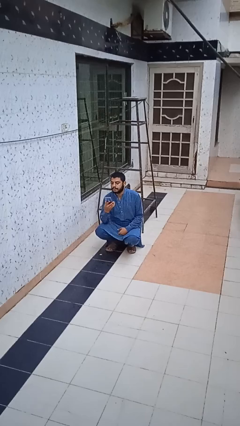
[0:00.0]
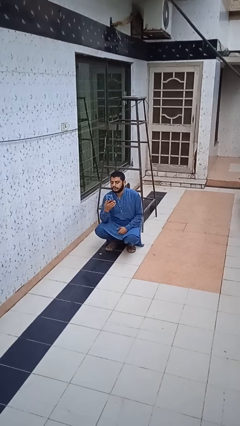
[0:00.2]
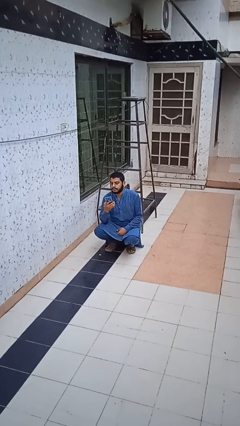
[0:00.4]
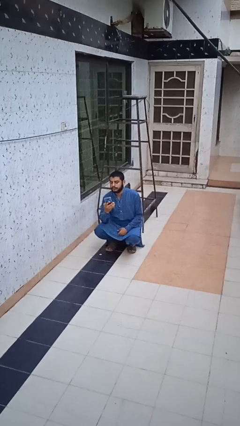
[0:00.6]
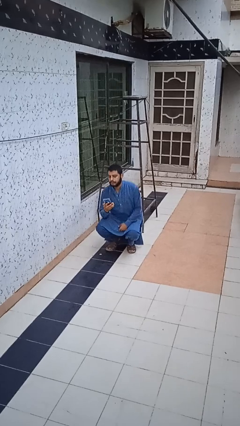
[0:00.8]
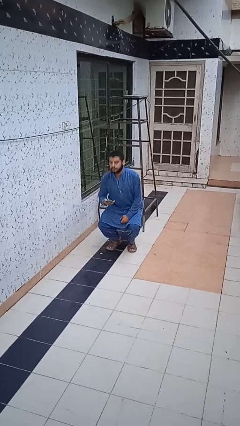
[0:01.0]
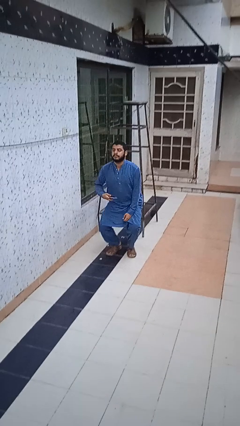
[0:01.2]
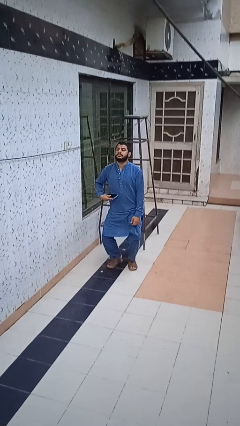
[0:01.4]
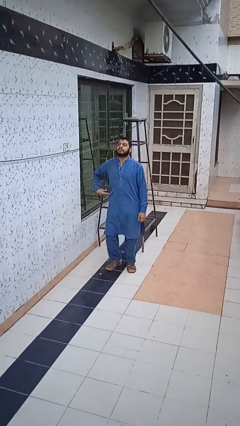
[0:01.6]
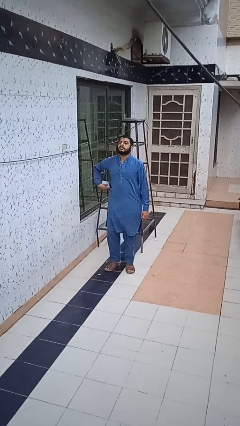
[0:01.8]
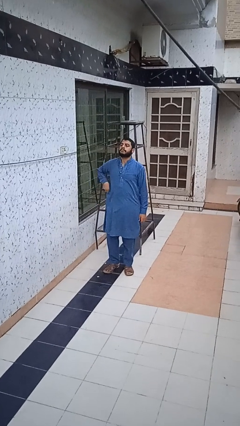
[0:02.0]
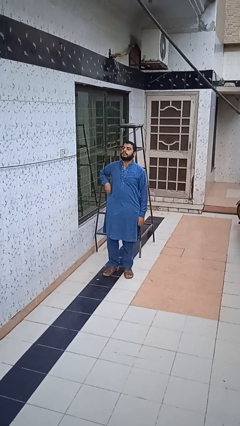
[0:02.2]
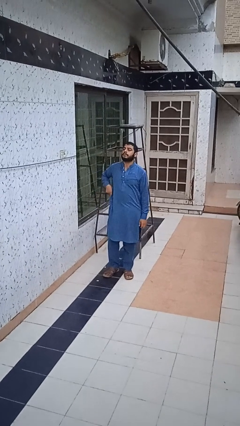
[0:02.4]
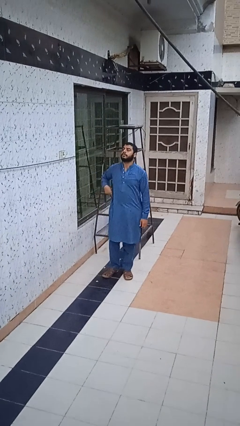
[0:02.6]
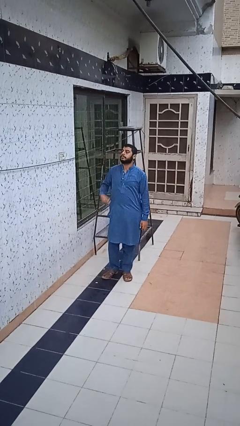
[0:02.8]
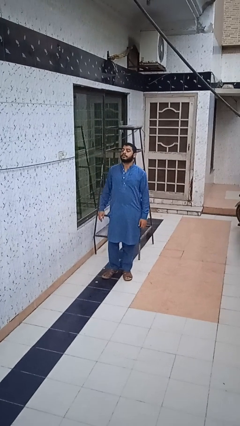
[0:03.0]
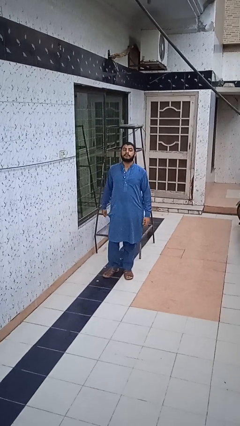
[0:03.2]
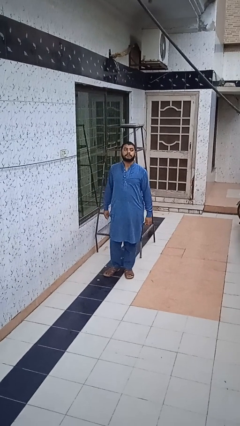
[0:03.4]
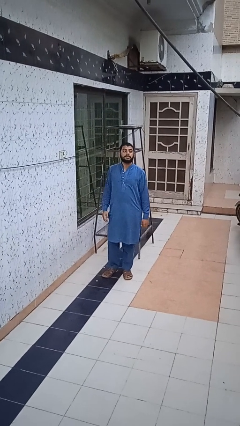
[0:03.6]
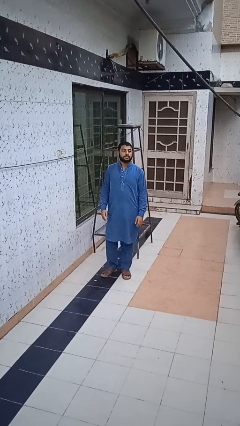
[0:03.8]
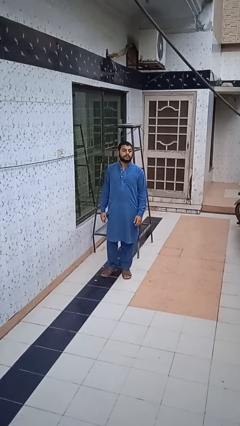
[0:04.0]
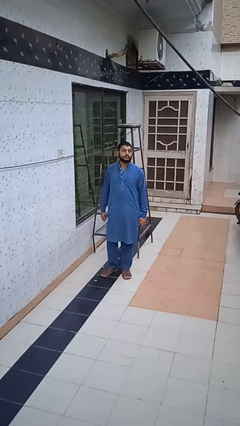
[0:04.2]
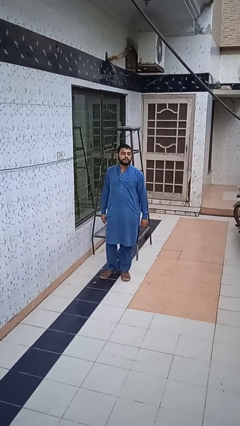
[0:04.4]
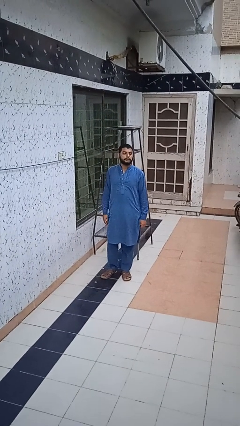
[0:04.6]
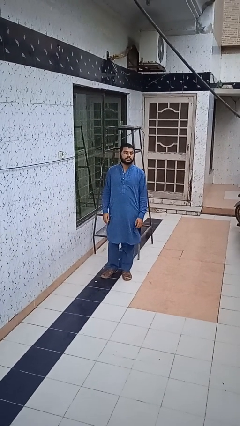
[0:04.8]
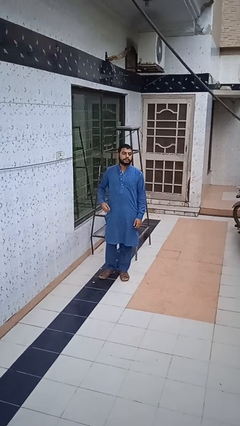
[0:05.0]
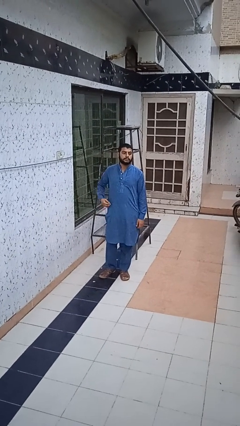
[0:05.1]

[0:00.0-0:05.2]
person puts phone into pocket

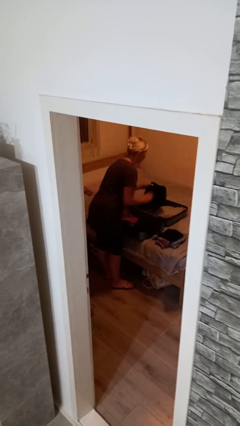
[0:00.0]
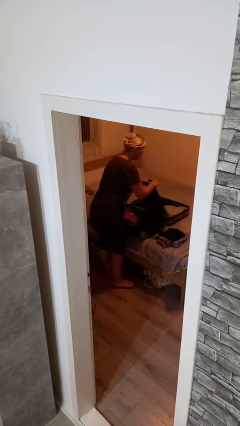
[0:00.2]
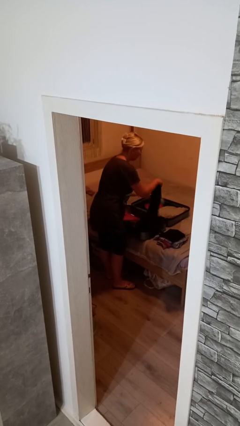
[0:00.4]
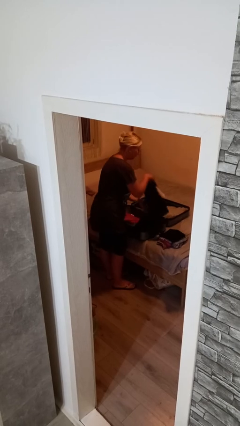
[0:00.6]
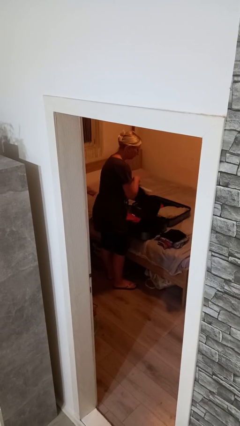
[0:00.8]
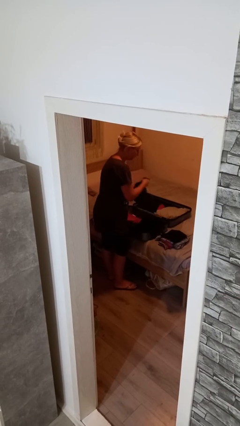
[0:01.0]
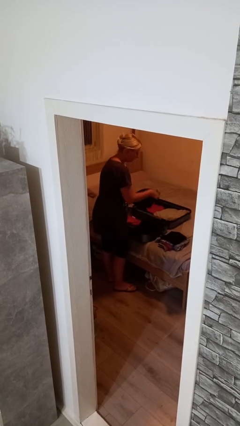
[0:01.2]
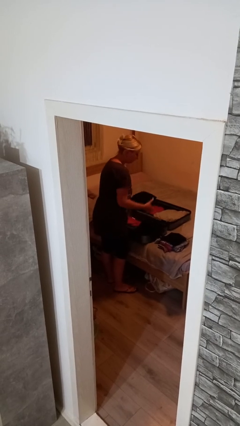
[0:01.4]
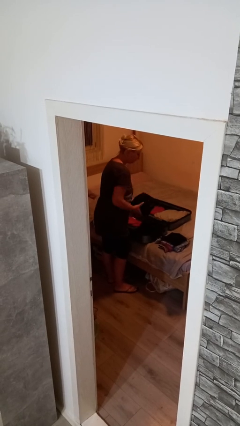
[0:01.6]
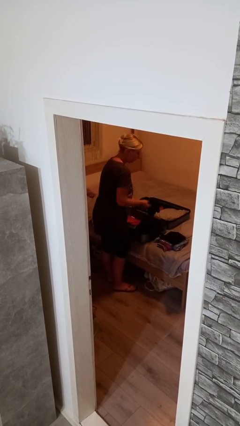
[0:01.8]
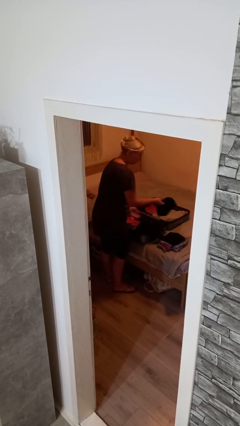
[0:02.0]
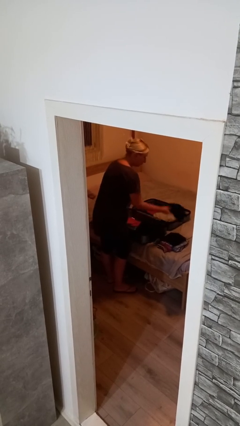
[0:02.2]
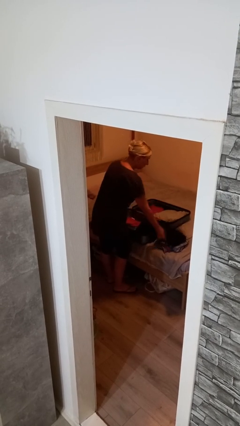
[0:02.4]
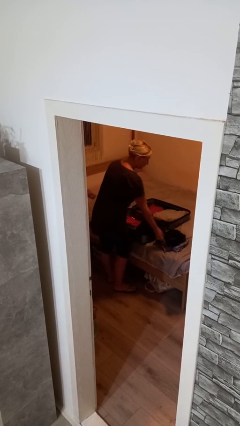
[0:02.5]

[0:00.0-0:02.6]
person unloads clothes from suitcase

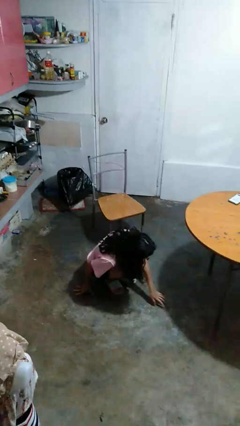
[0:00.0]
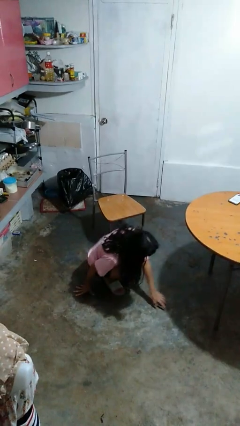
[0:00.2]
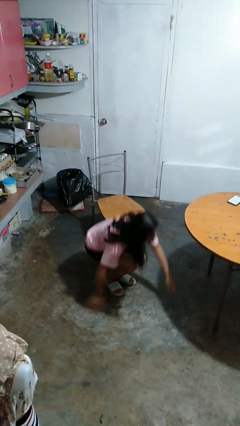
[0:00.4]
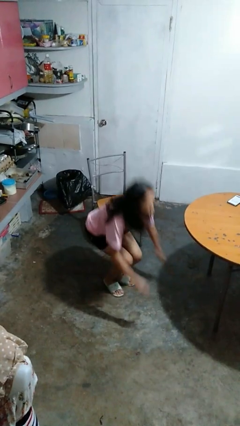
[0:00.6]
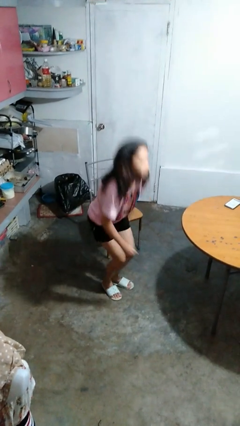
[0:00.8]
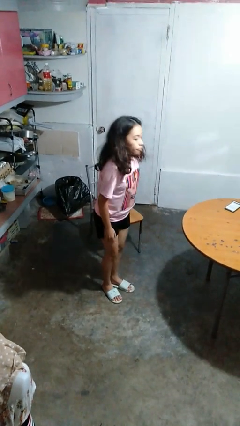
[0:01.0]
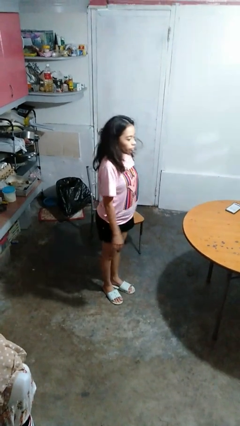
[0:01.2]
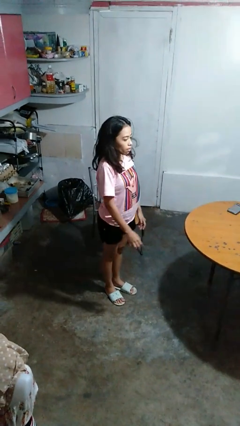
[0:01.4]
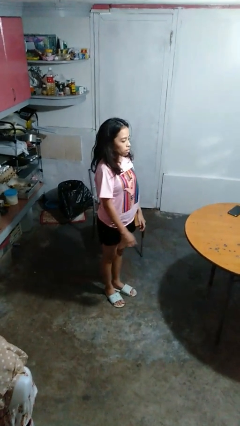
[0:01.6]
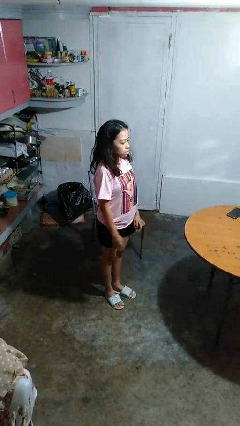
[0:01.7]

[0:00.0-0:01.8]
person stands up from floor

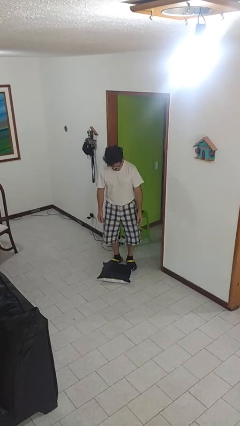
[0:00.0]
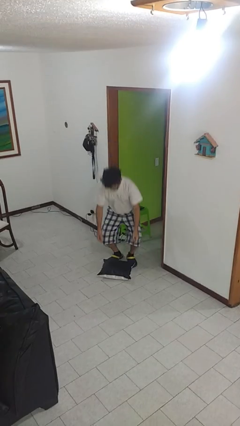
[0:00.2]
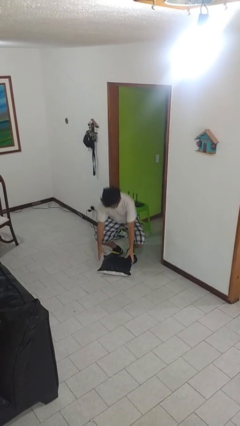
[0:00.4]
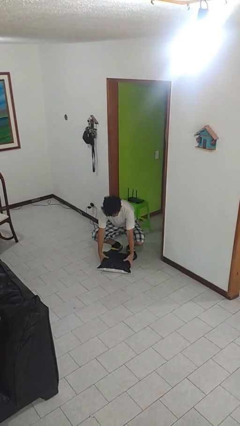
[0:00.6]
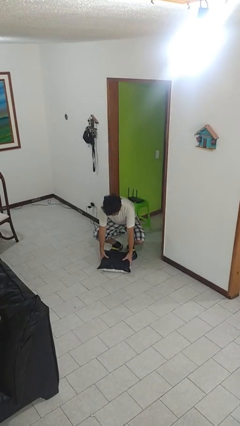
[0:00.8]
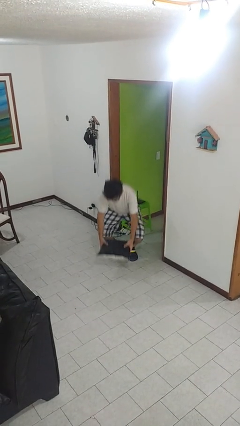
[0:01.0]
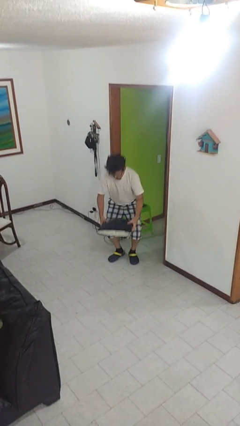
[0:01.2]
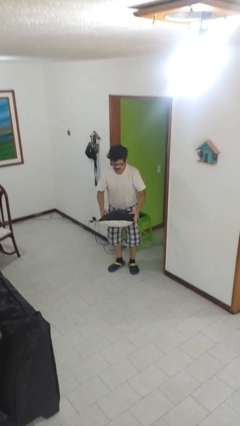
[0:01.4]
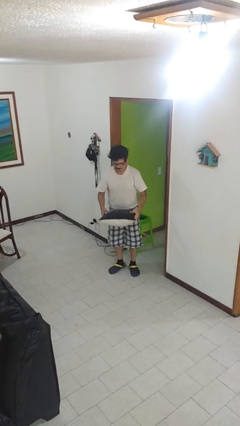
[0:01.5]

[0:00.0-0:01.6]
person picks up object from floor

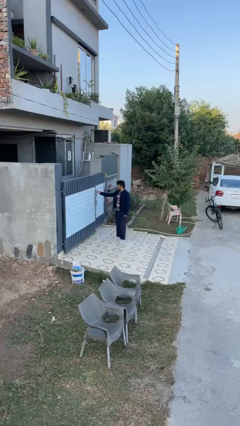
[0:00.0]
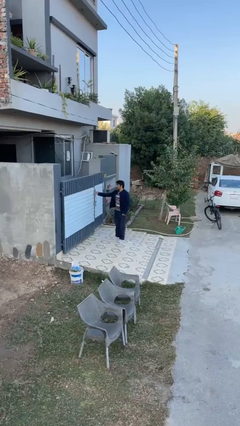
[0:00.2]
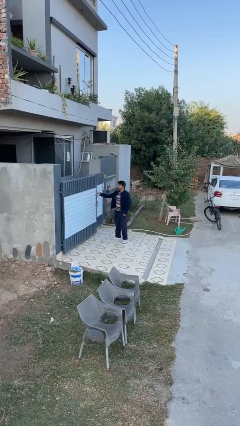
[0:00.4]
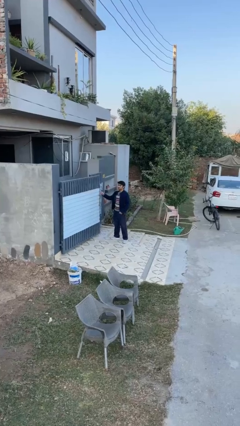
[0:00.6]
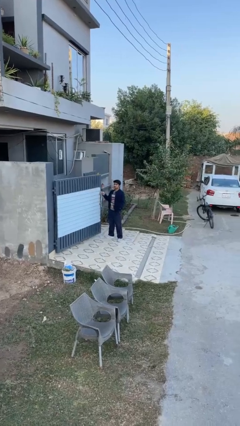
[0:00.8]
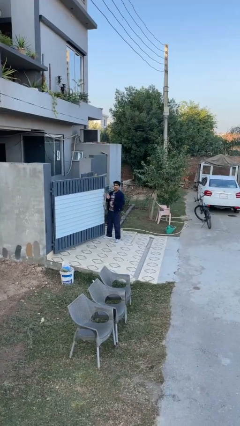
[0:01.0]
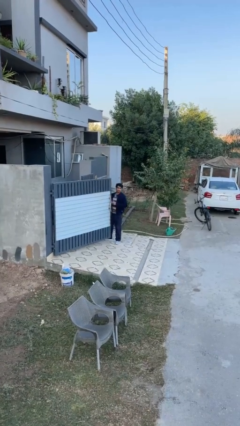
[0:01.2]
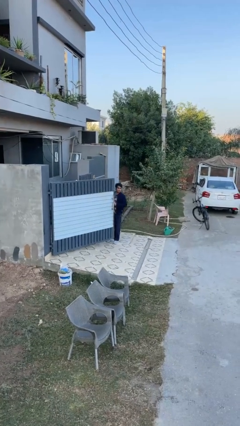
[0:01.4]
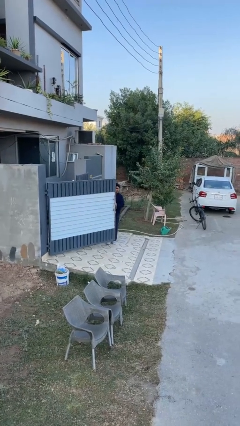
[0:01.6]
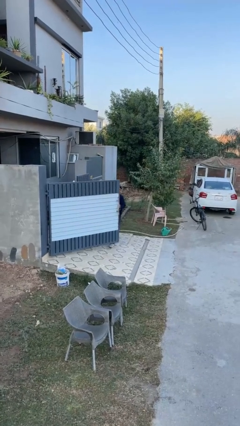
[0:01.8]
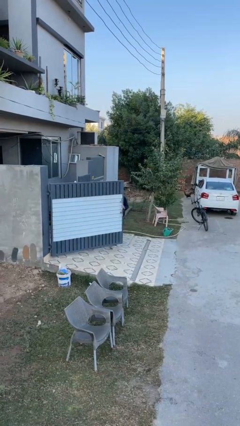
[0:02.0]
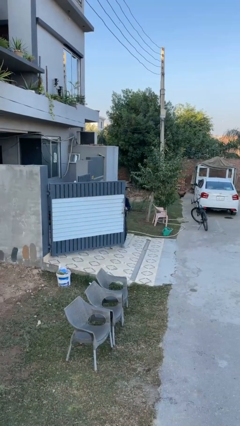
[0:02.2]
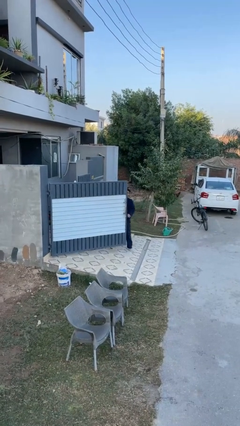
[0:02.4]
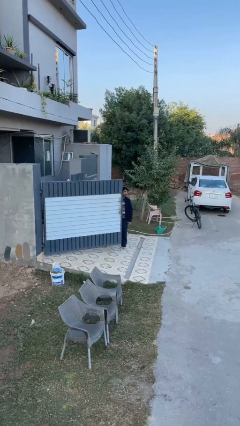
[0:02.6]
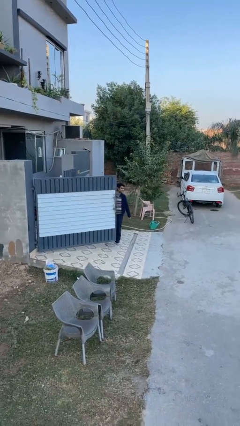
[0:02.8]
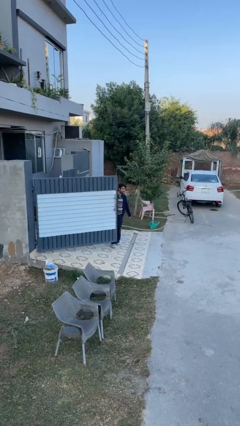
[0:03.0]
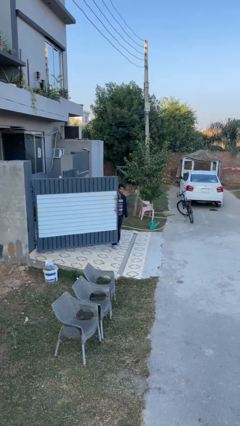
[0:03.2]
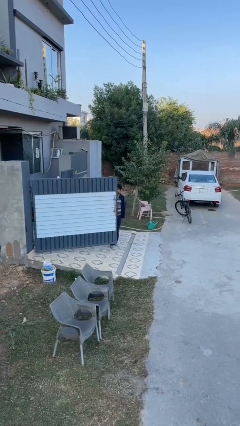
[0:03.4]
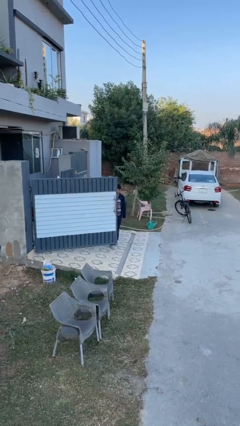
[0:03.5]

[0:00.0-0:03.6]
person opens facility door

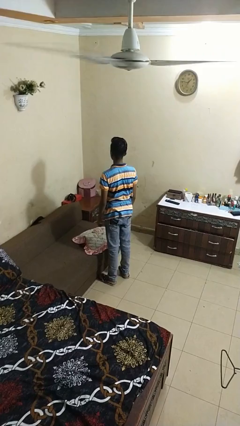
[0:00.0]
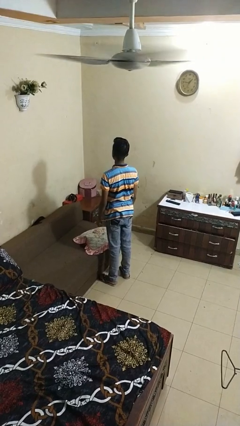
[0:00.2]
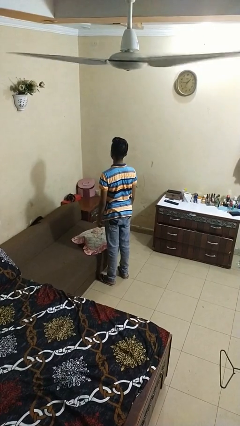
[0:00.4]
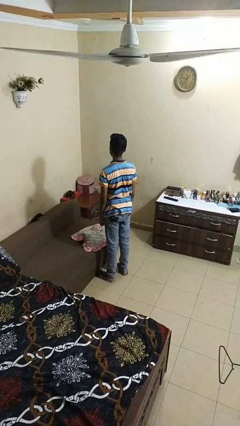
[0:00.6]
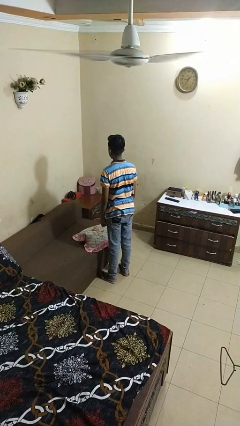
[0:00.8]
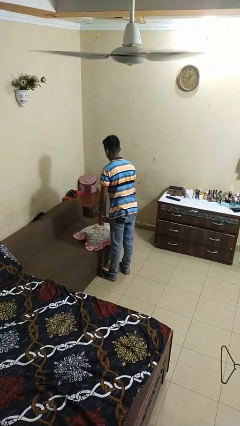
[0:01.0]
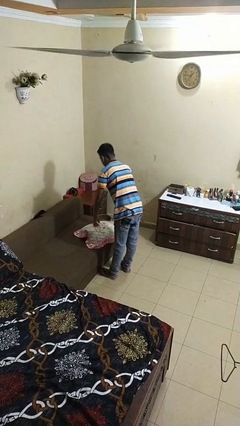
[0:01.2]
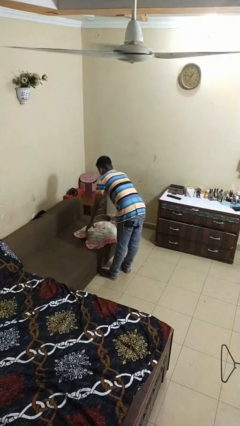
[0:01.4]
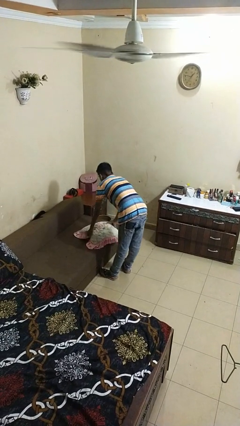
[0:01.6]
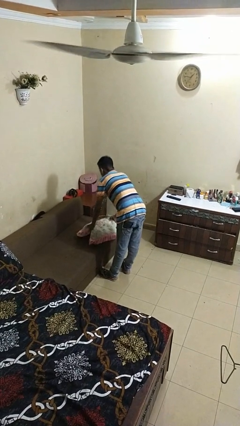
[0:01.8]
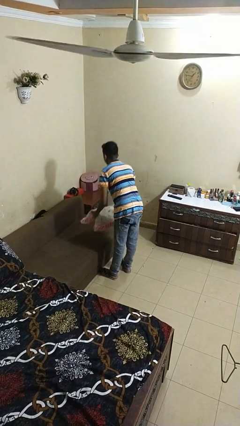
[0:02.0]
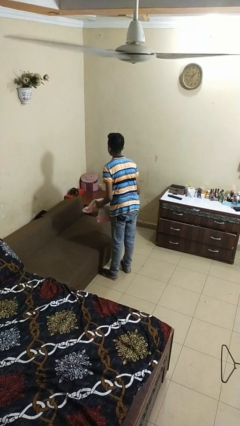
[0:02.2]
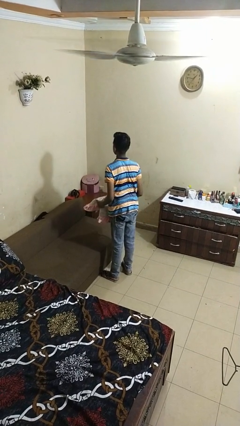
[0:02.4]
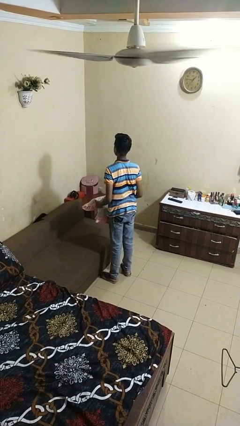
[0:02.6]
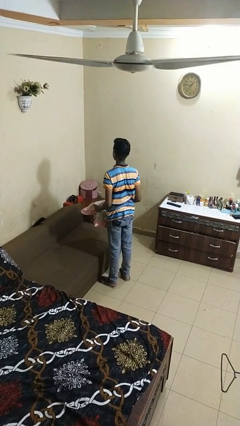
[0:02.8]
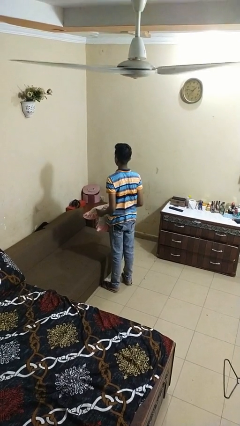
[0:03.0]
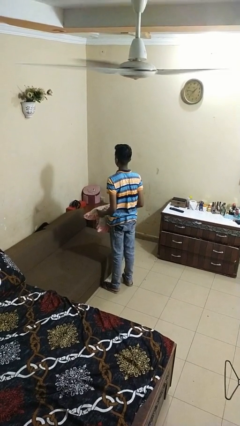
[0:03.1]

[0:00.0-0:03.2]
person picks up object from couch
